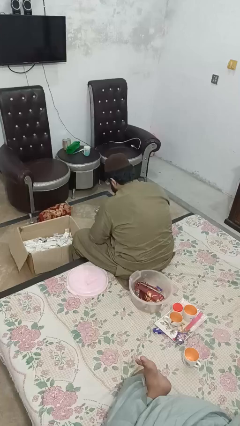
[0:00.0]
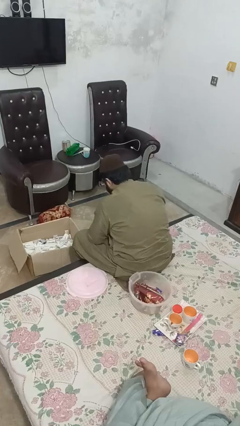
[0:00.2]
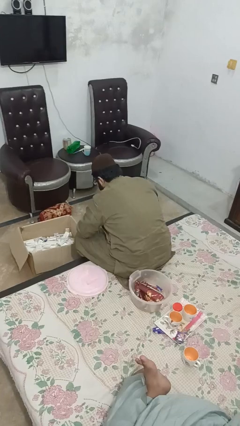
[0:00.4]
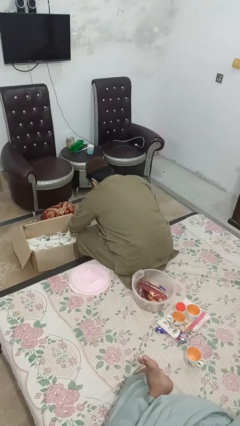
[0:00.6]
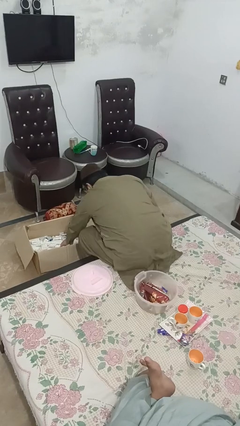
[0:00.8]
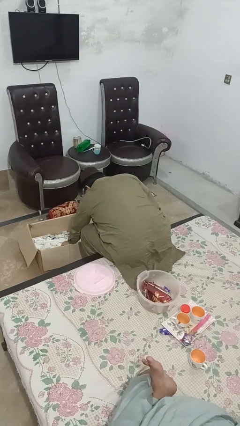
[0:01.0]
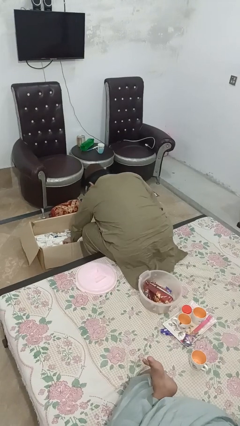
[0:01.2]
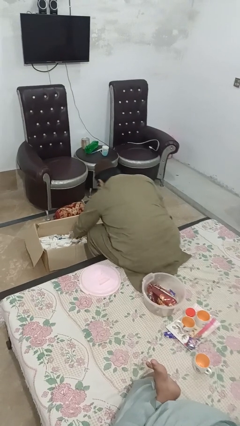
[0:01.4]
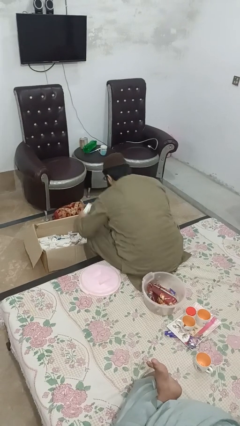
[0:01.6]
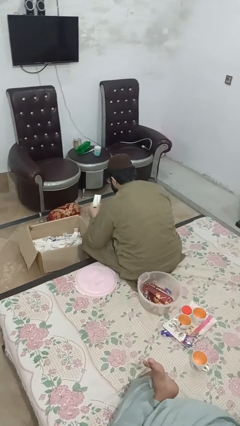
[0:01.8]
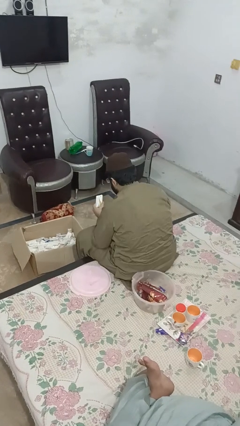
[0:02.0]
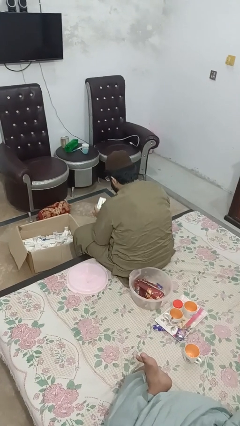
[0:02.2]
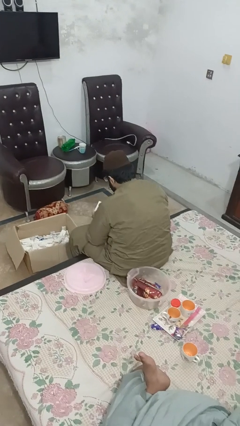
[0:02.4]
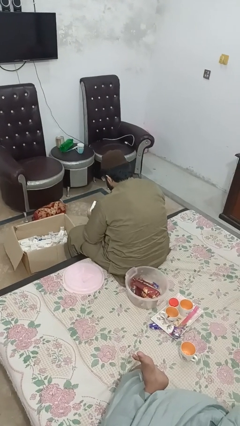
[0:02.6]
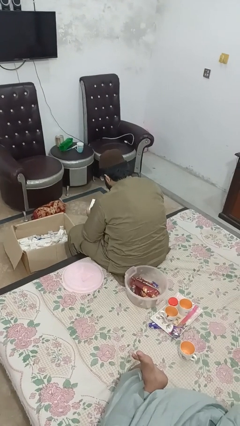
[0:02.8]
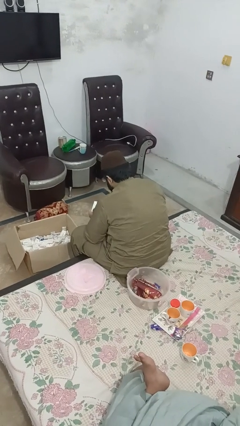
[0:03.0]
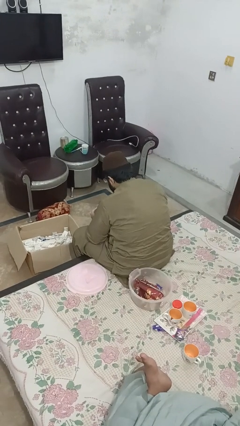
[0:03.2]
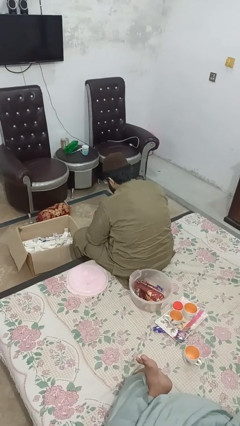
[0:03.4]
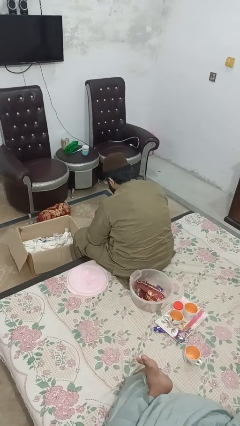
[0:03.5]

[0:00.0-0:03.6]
person takes object from box

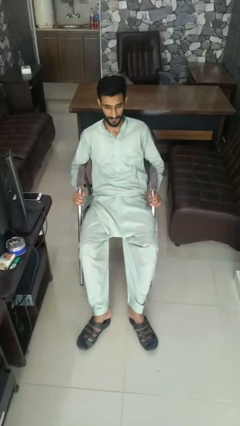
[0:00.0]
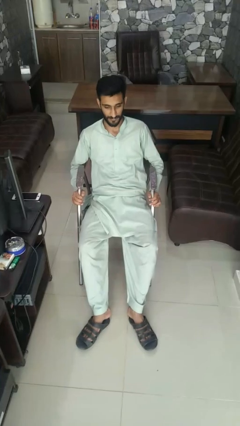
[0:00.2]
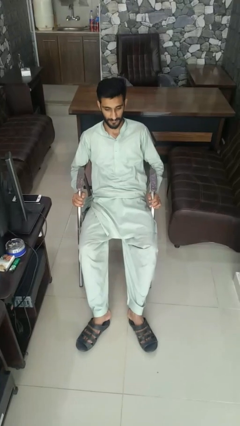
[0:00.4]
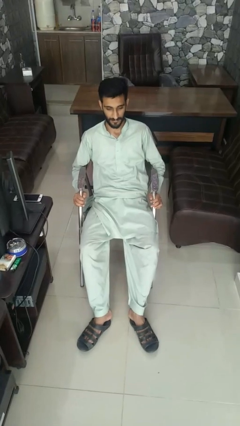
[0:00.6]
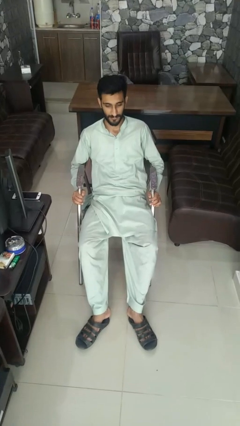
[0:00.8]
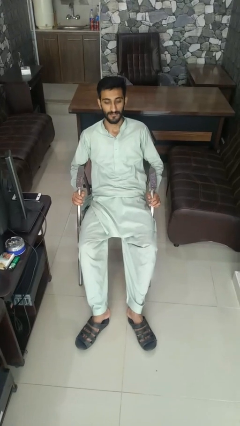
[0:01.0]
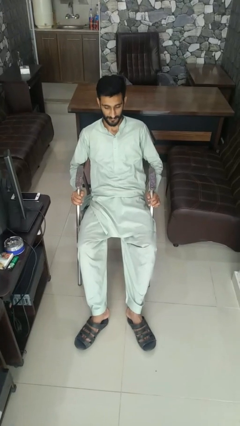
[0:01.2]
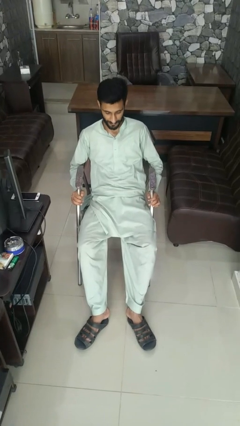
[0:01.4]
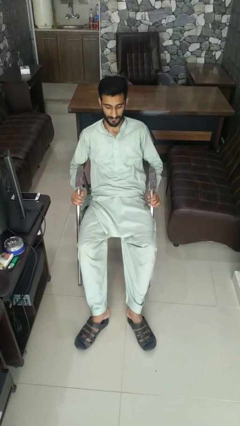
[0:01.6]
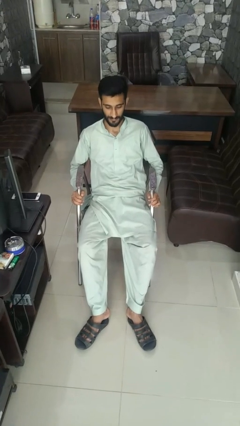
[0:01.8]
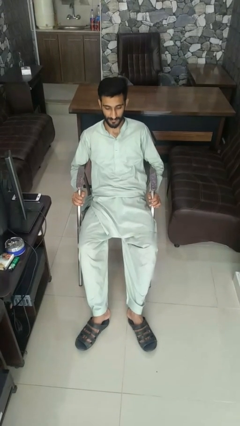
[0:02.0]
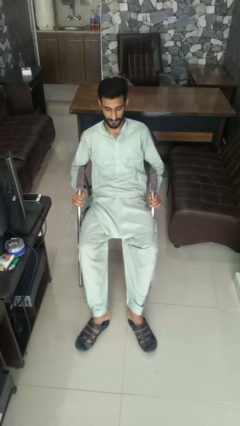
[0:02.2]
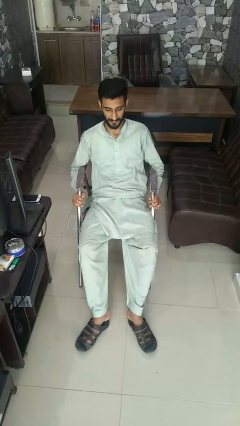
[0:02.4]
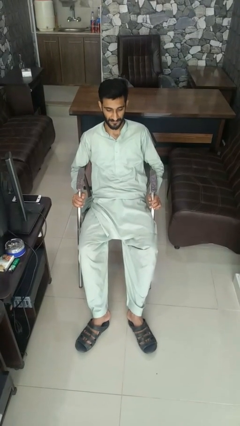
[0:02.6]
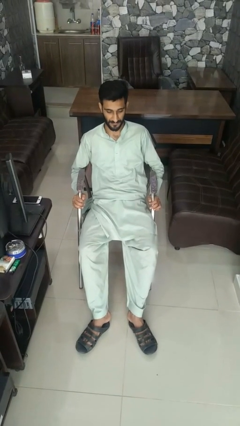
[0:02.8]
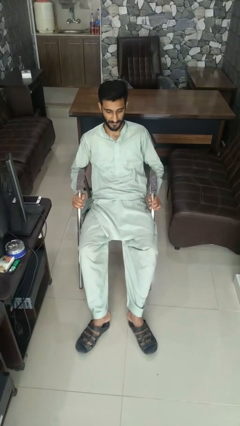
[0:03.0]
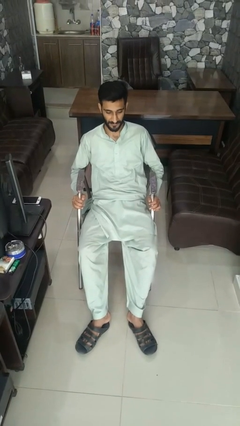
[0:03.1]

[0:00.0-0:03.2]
person nods head

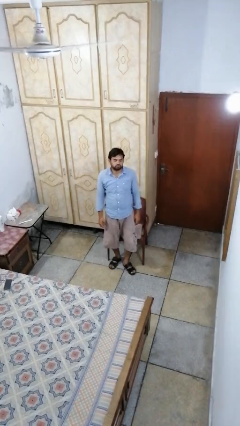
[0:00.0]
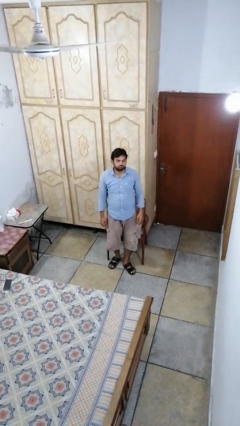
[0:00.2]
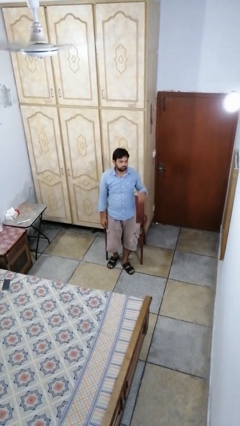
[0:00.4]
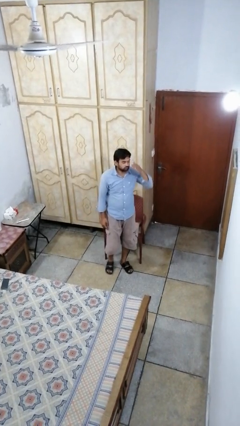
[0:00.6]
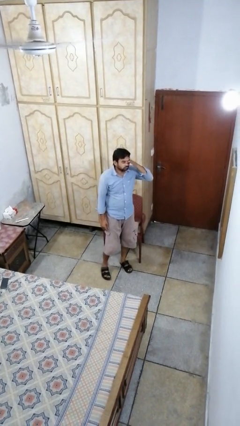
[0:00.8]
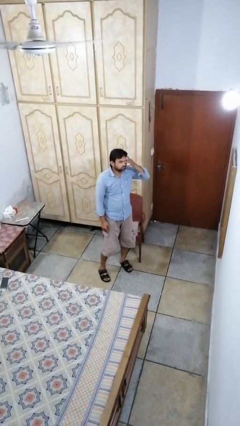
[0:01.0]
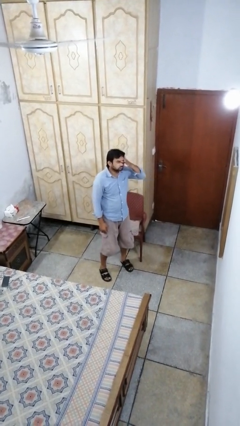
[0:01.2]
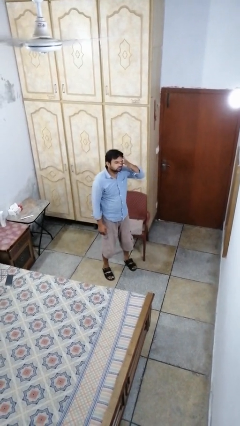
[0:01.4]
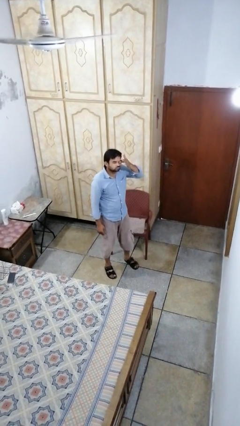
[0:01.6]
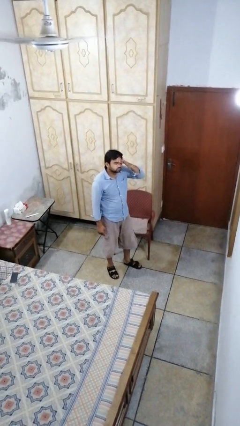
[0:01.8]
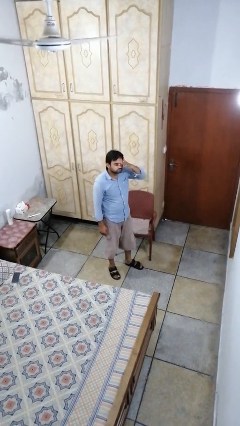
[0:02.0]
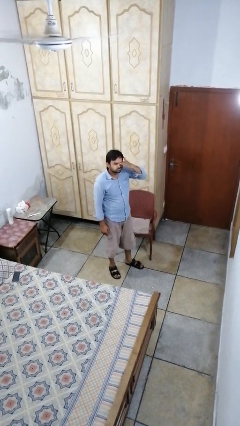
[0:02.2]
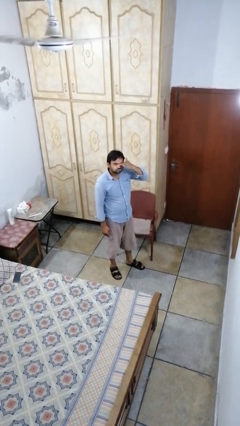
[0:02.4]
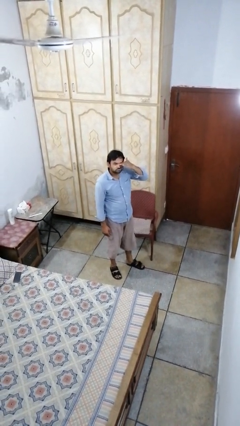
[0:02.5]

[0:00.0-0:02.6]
person rubs eyes

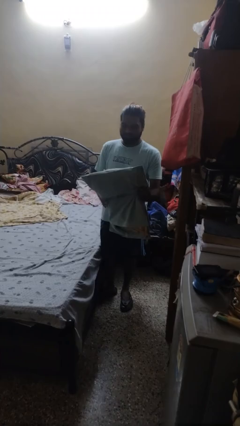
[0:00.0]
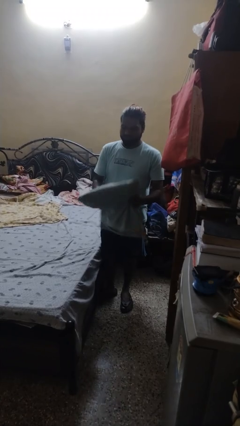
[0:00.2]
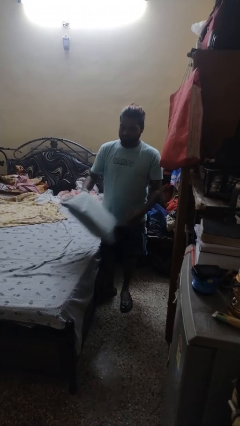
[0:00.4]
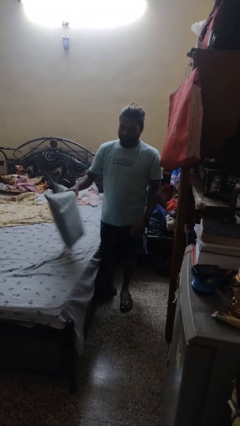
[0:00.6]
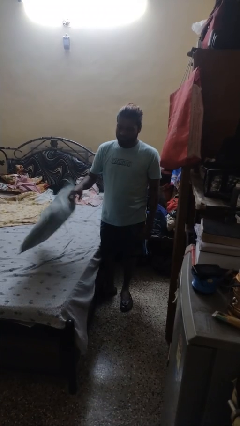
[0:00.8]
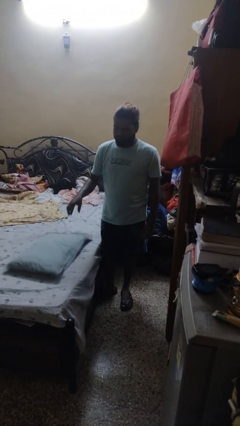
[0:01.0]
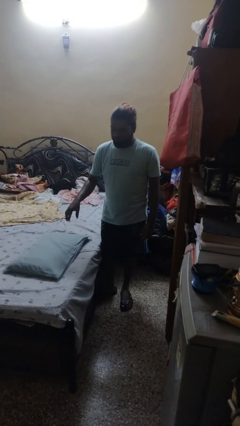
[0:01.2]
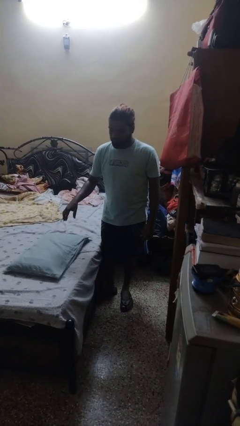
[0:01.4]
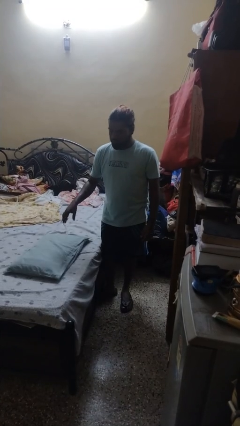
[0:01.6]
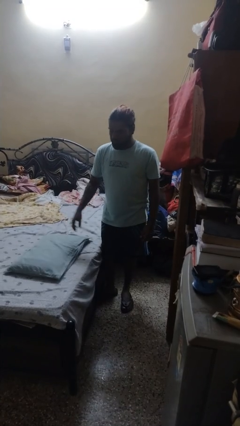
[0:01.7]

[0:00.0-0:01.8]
person puts down object on bed

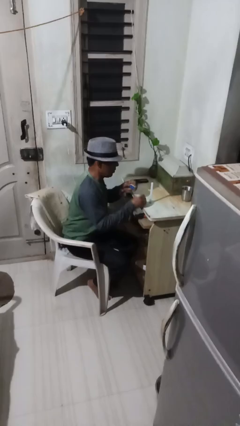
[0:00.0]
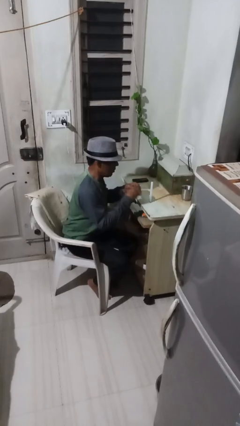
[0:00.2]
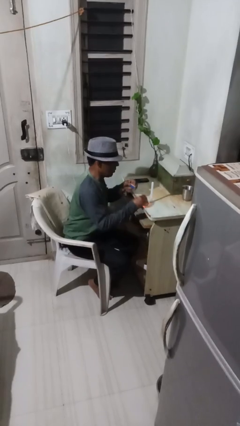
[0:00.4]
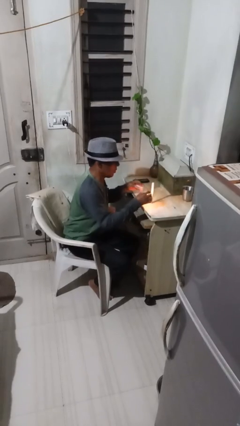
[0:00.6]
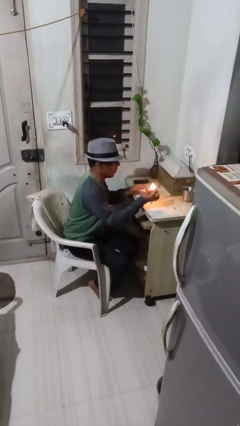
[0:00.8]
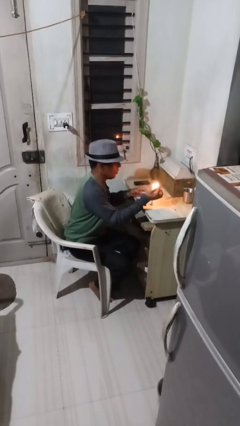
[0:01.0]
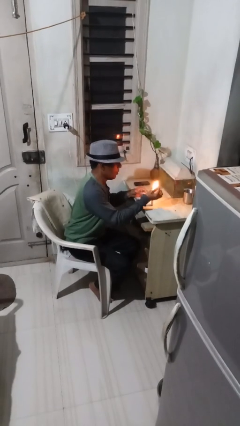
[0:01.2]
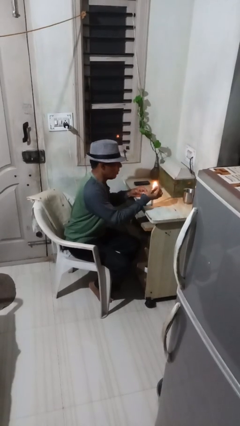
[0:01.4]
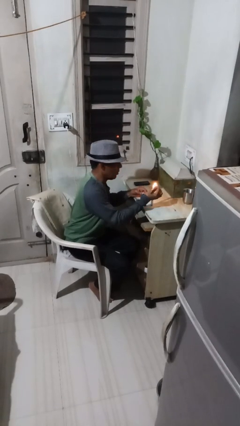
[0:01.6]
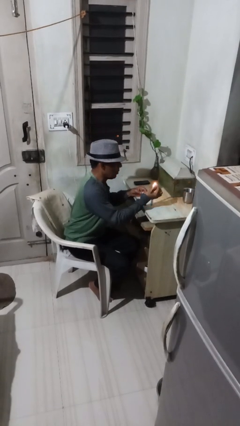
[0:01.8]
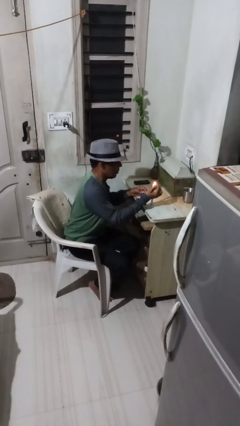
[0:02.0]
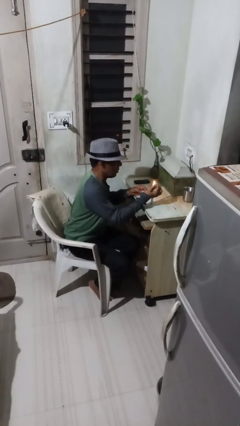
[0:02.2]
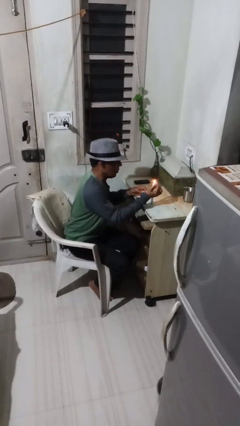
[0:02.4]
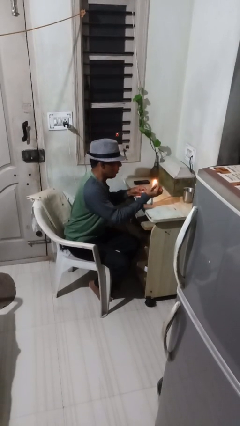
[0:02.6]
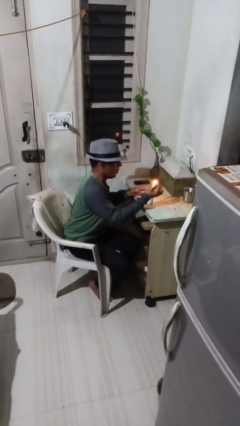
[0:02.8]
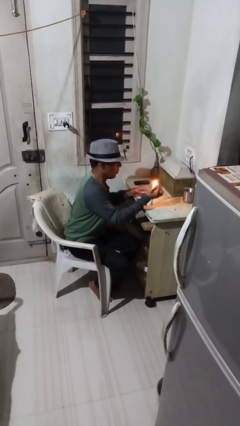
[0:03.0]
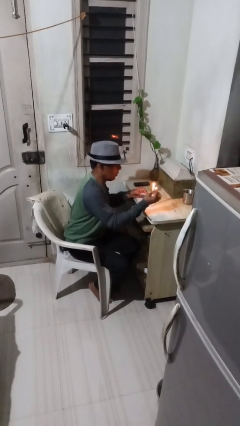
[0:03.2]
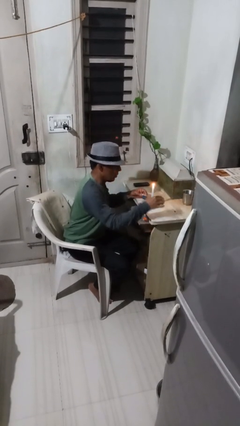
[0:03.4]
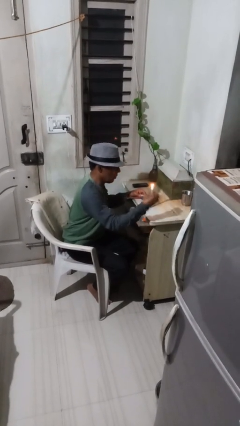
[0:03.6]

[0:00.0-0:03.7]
person lights candle

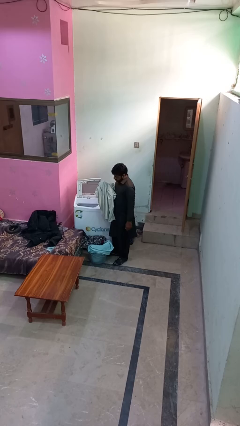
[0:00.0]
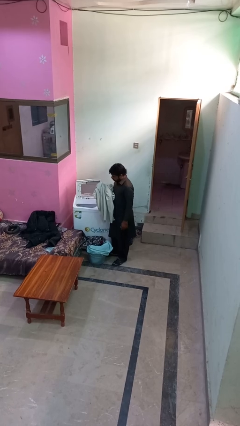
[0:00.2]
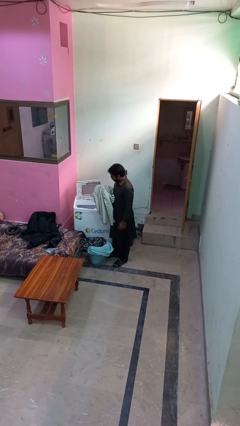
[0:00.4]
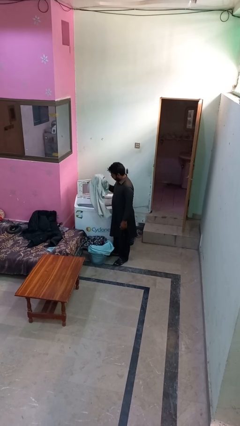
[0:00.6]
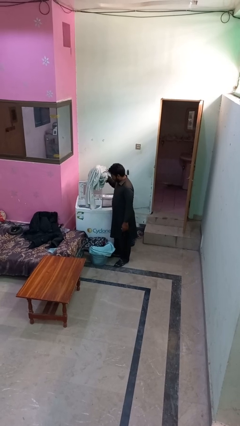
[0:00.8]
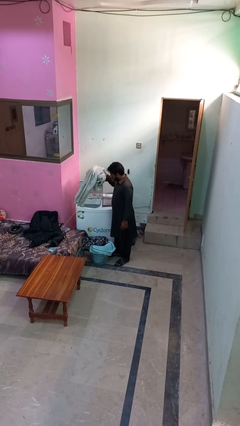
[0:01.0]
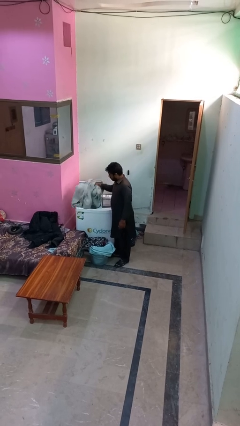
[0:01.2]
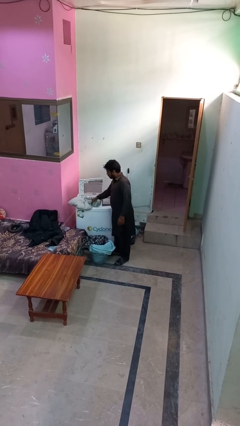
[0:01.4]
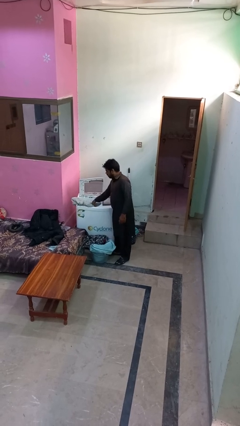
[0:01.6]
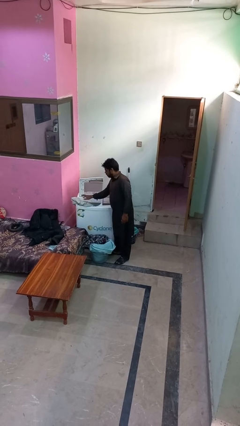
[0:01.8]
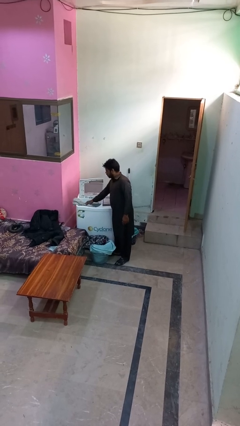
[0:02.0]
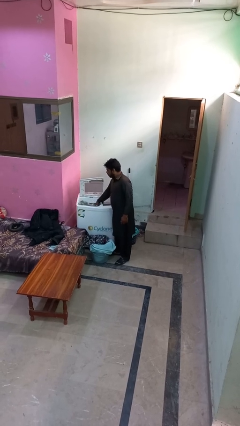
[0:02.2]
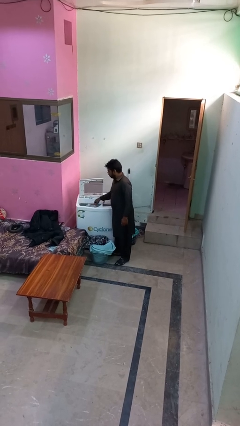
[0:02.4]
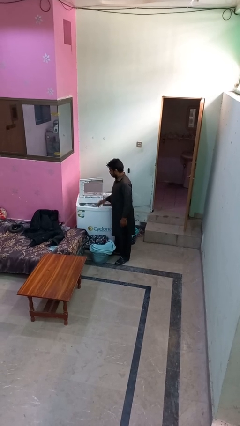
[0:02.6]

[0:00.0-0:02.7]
person loads clotheswasher
